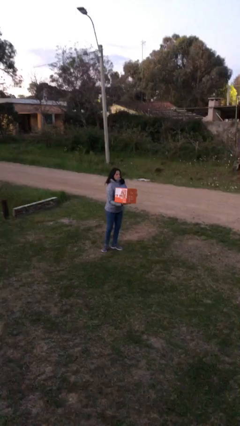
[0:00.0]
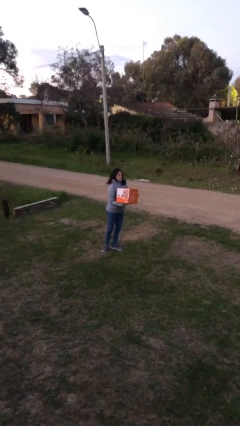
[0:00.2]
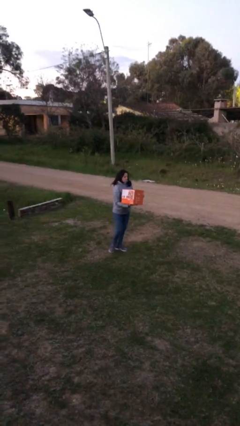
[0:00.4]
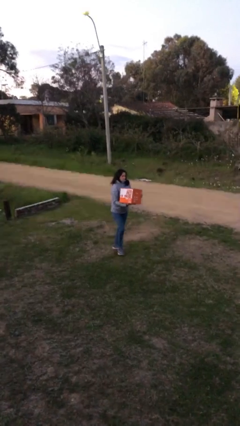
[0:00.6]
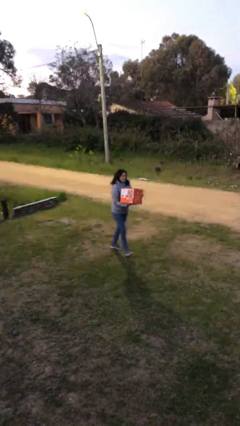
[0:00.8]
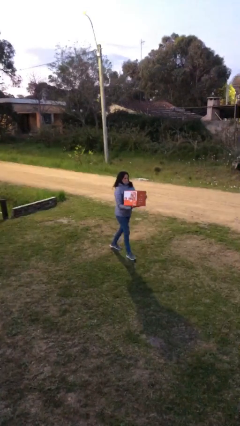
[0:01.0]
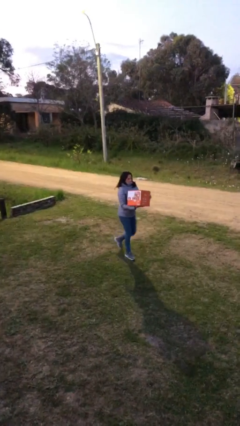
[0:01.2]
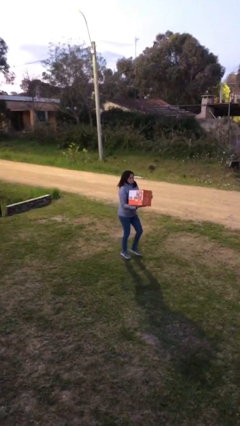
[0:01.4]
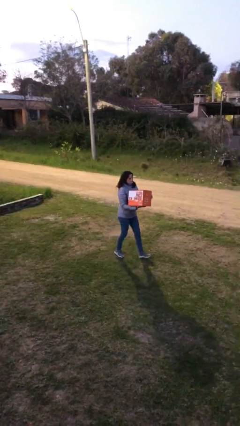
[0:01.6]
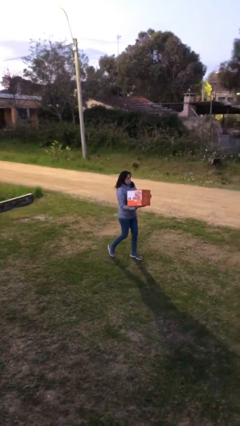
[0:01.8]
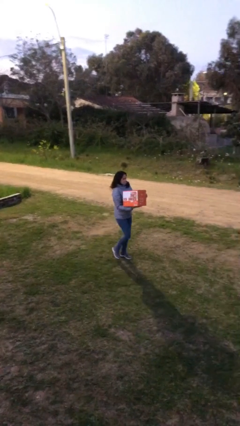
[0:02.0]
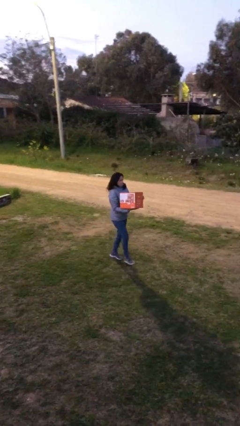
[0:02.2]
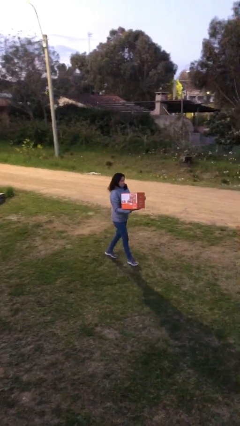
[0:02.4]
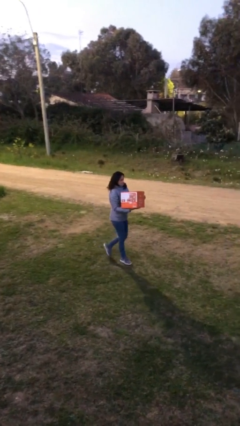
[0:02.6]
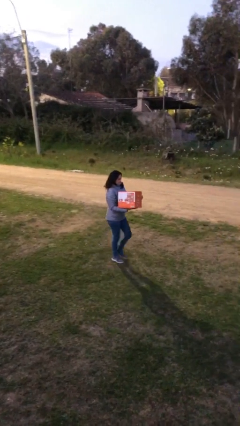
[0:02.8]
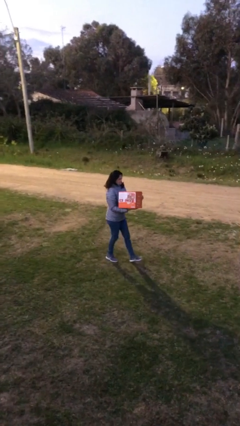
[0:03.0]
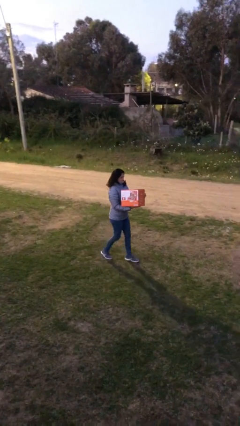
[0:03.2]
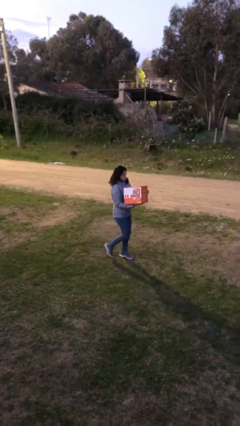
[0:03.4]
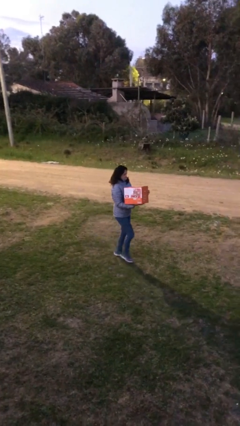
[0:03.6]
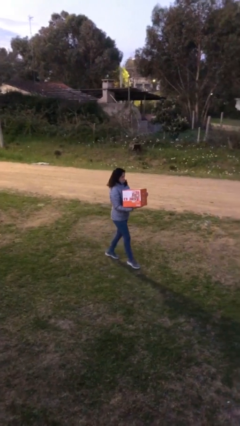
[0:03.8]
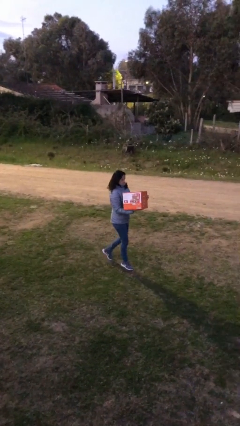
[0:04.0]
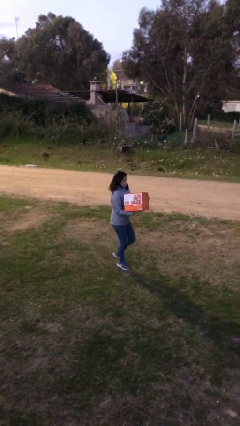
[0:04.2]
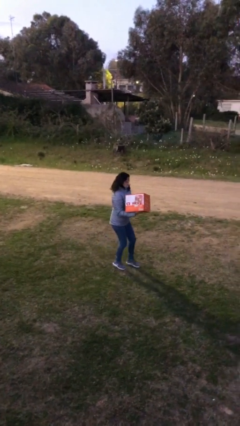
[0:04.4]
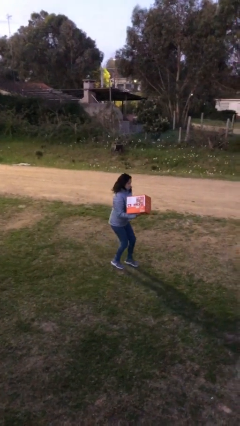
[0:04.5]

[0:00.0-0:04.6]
person carries heavy object

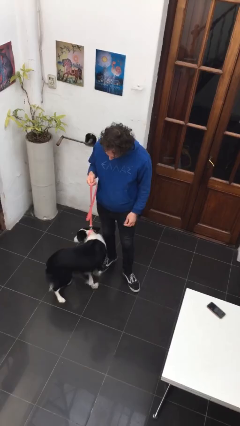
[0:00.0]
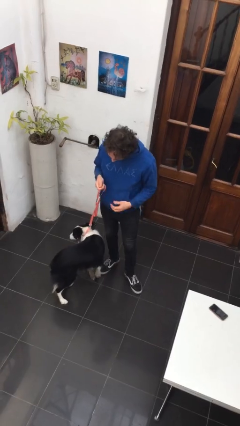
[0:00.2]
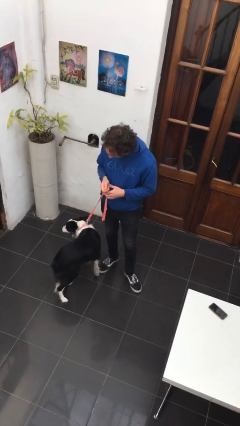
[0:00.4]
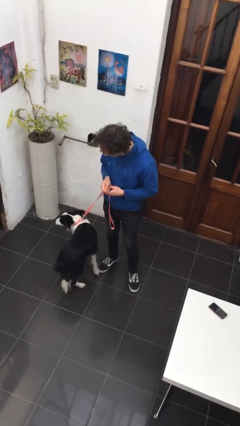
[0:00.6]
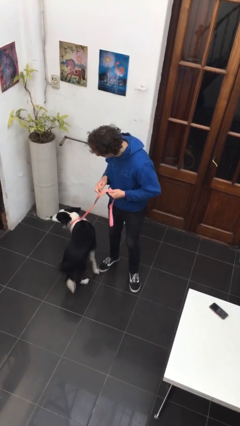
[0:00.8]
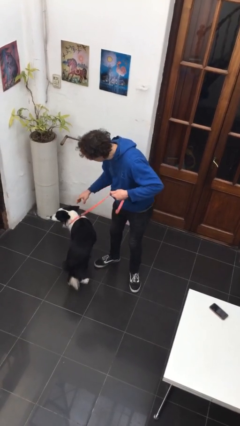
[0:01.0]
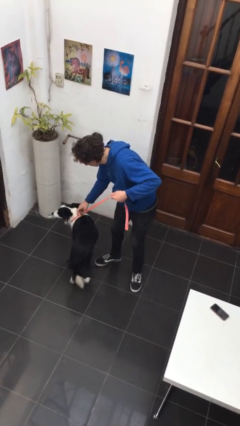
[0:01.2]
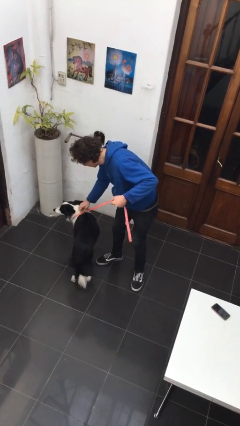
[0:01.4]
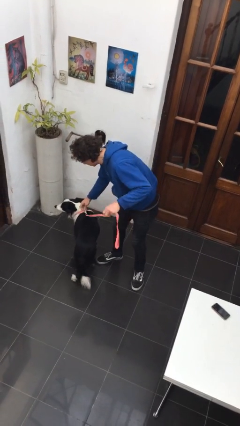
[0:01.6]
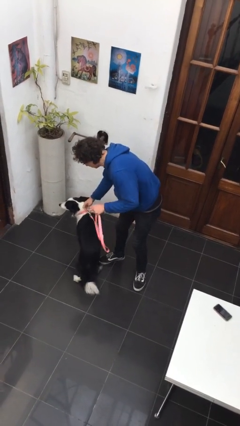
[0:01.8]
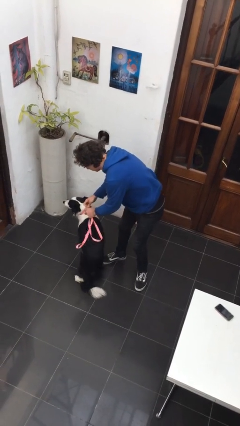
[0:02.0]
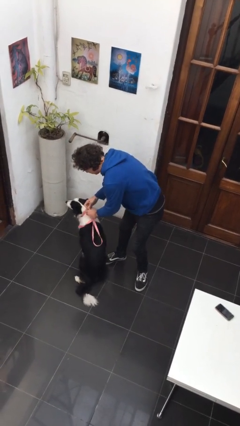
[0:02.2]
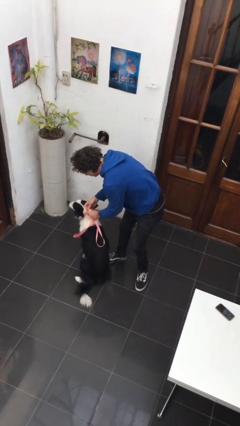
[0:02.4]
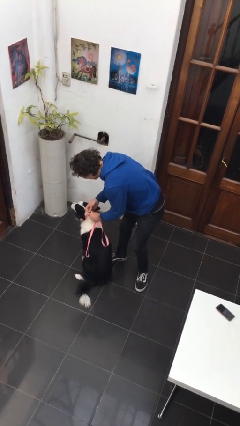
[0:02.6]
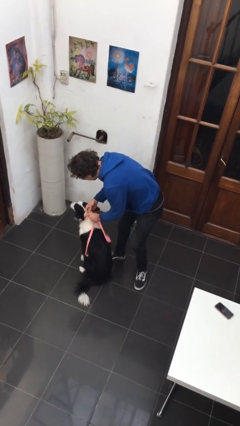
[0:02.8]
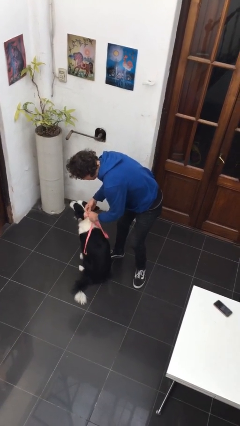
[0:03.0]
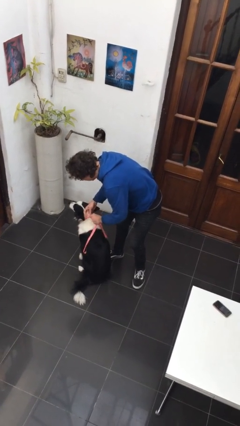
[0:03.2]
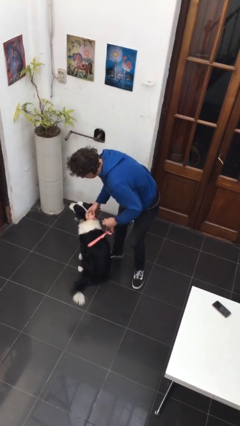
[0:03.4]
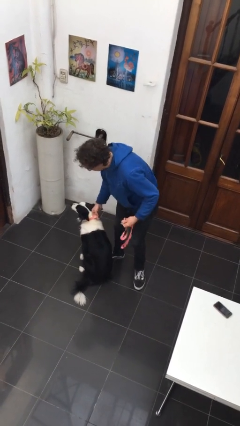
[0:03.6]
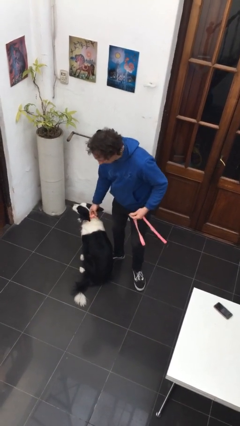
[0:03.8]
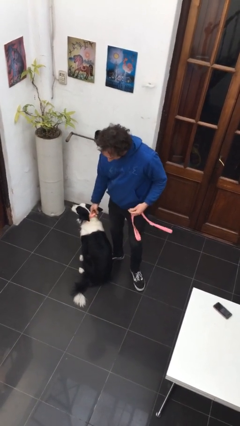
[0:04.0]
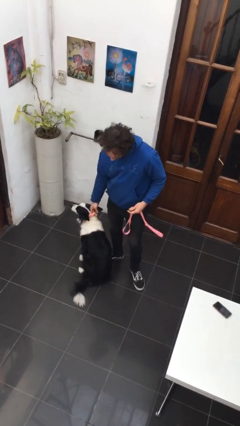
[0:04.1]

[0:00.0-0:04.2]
person unattaches leash from dog

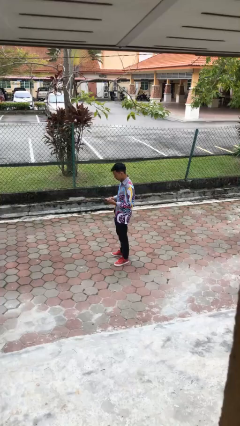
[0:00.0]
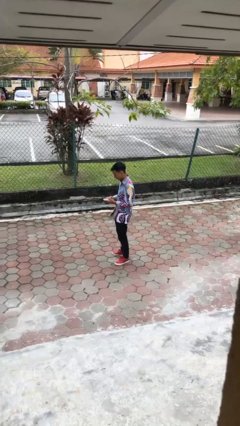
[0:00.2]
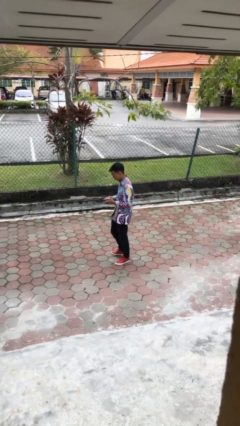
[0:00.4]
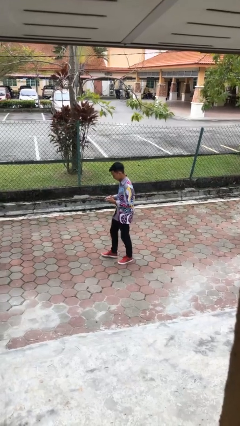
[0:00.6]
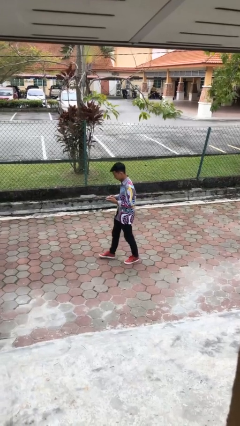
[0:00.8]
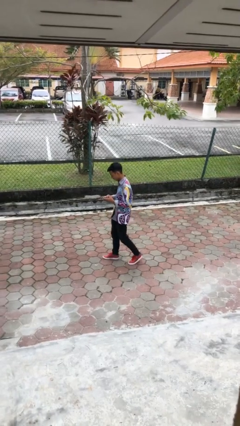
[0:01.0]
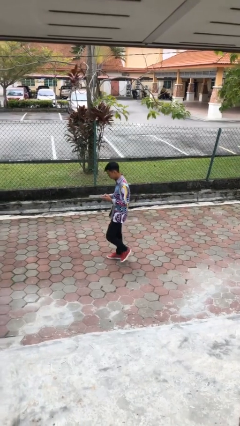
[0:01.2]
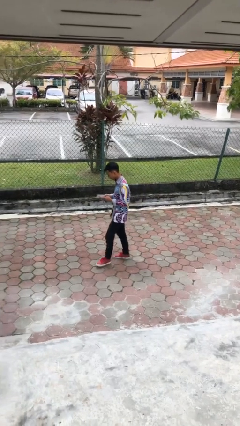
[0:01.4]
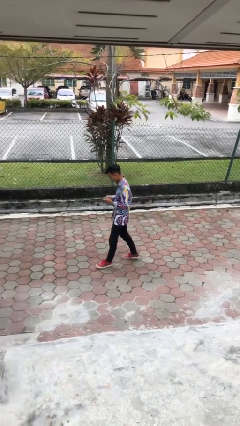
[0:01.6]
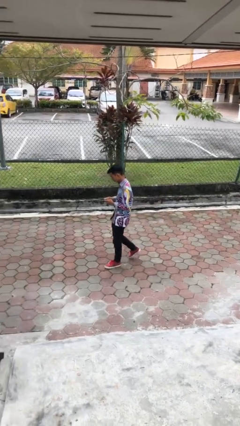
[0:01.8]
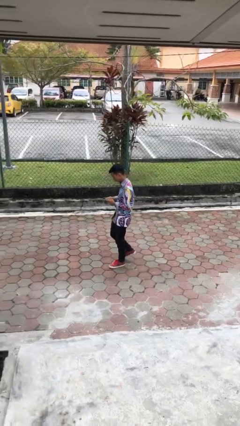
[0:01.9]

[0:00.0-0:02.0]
person texts on phone

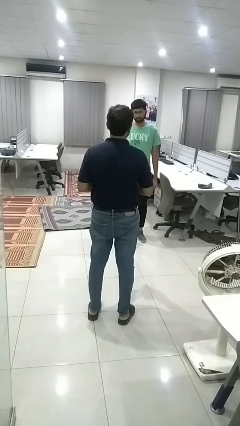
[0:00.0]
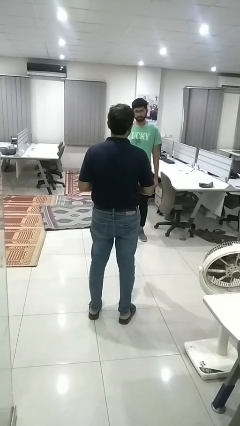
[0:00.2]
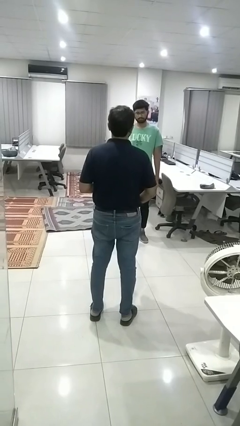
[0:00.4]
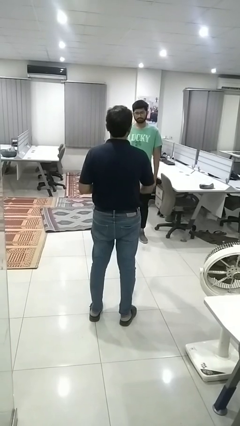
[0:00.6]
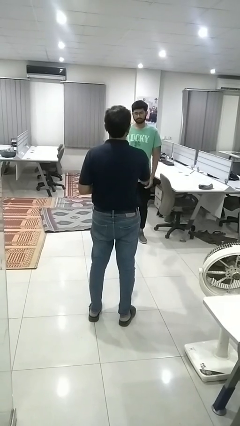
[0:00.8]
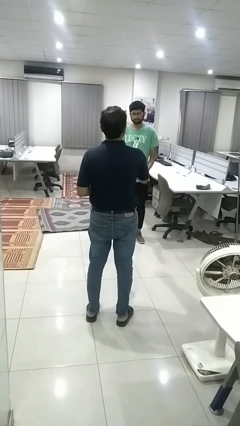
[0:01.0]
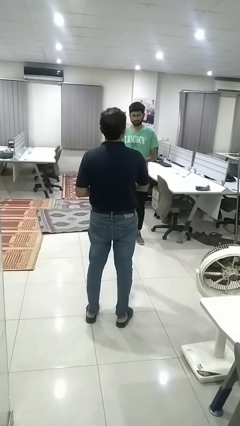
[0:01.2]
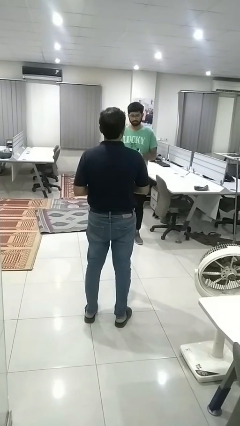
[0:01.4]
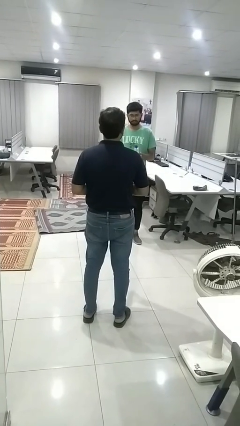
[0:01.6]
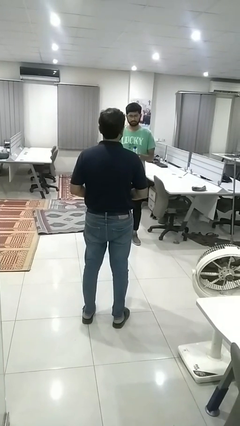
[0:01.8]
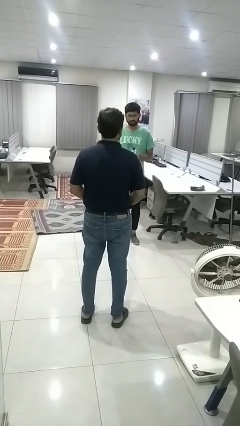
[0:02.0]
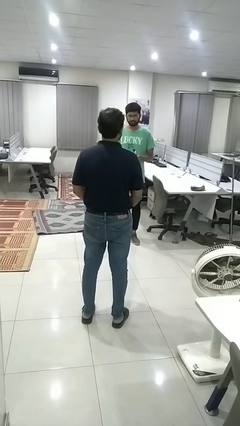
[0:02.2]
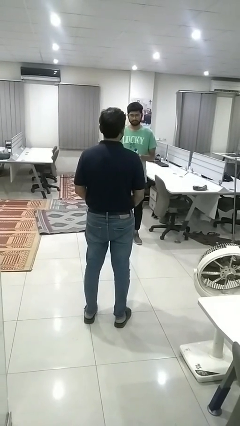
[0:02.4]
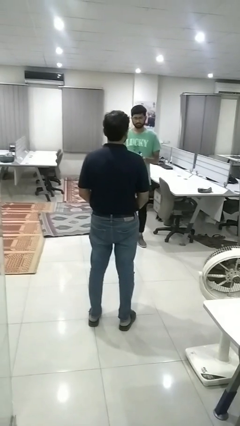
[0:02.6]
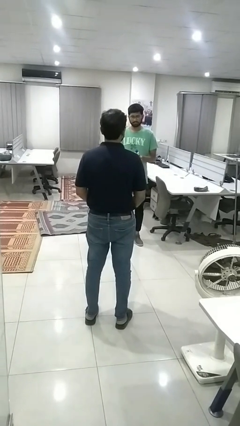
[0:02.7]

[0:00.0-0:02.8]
person throws object to person

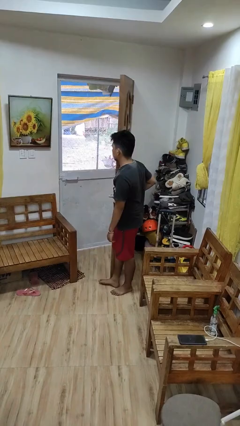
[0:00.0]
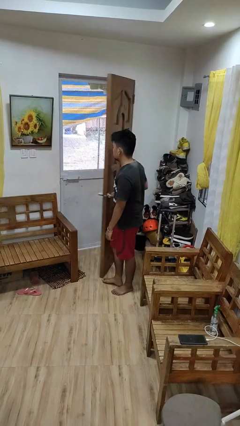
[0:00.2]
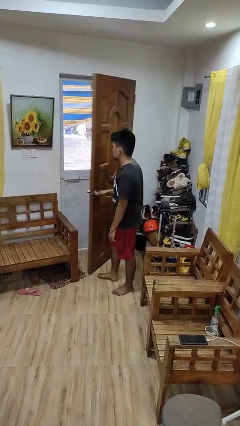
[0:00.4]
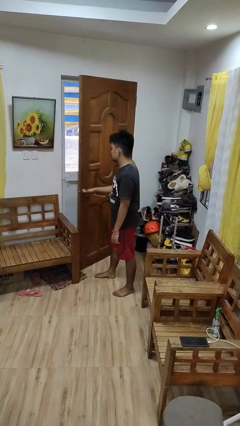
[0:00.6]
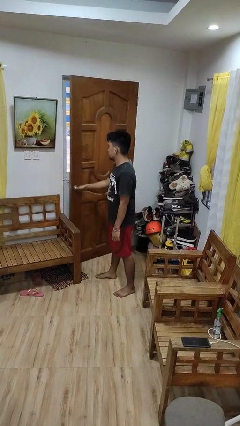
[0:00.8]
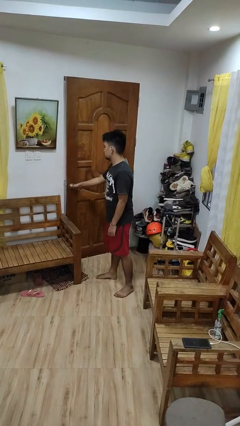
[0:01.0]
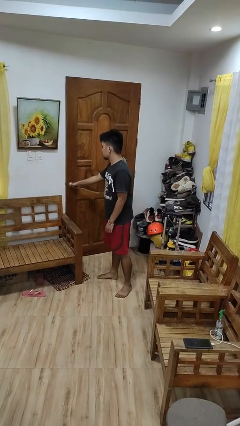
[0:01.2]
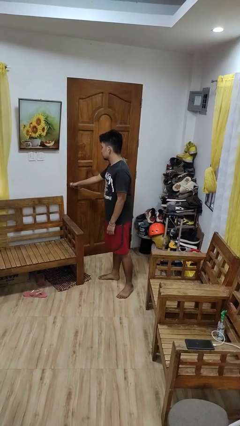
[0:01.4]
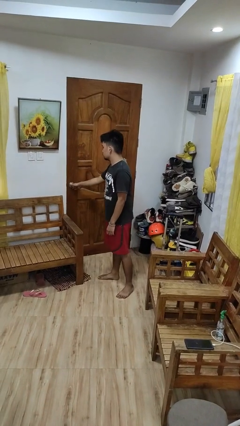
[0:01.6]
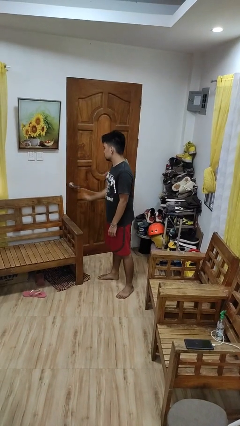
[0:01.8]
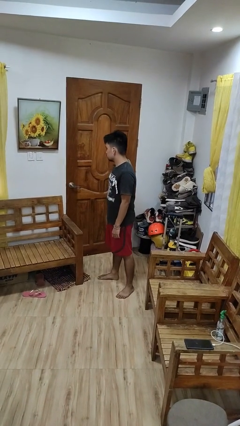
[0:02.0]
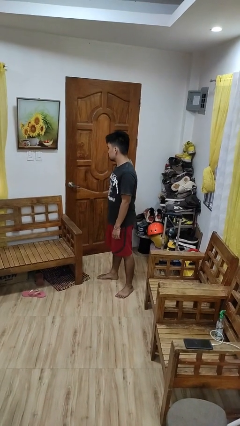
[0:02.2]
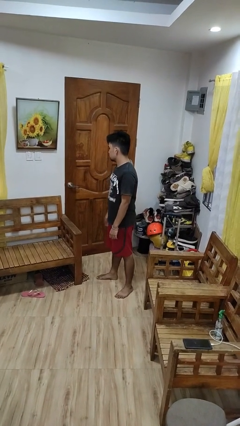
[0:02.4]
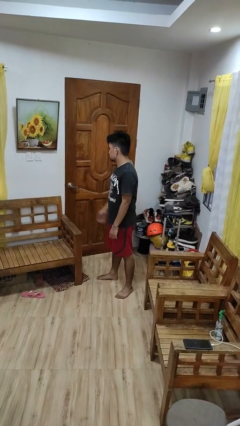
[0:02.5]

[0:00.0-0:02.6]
person closes facility door

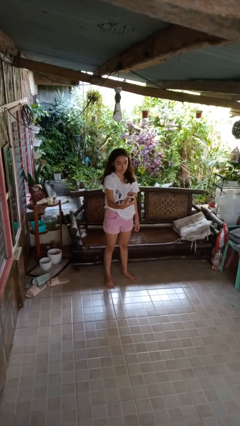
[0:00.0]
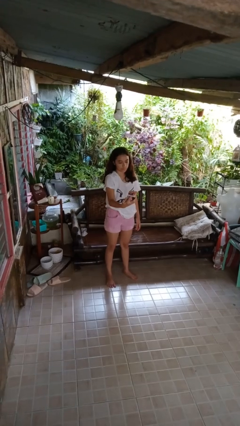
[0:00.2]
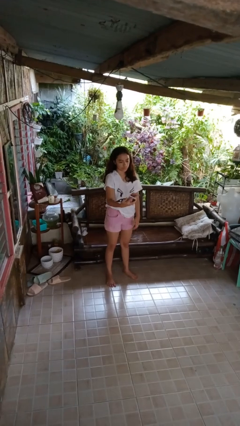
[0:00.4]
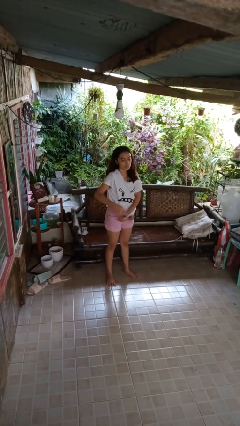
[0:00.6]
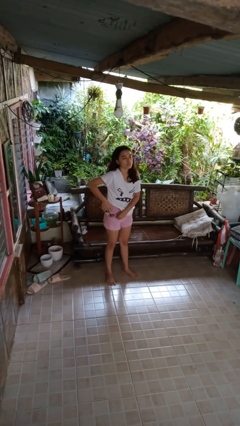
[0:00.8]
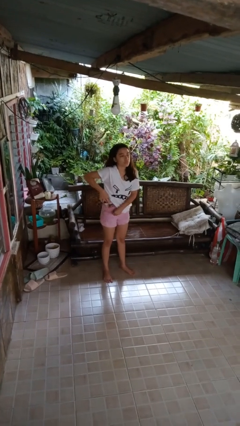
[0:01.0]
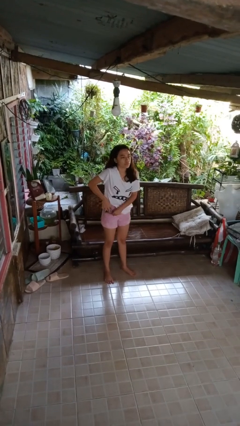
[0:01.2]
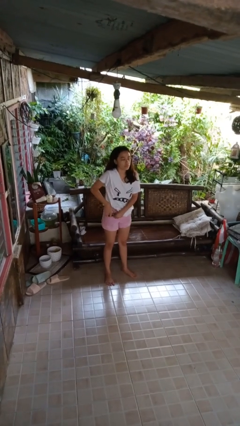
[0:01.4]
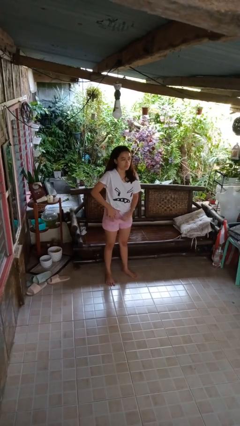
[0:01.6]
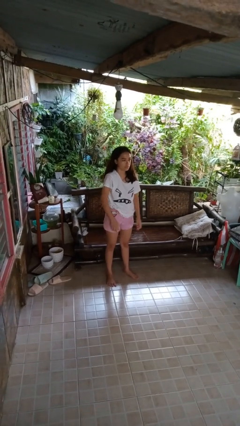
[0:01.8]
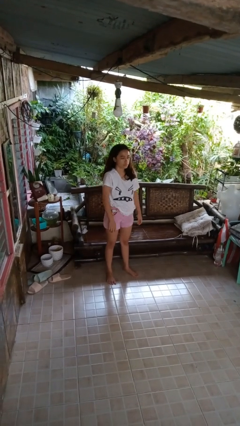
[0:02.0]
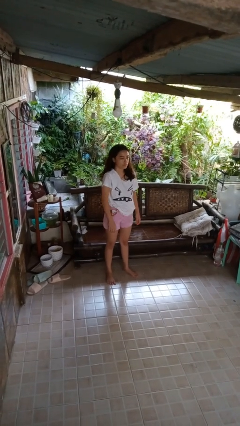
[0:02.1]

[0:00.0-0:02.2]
person puts phone into pocket
